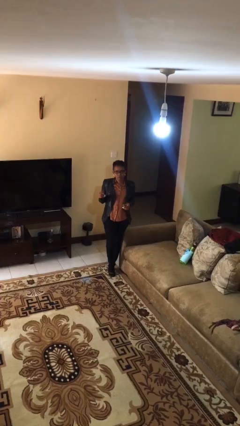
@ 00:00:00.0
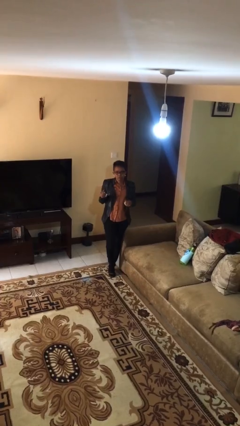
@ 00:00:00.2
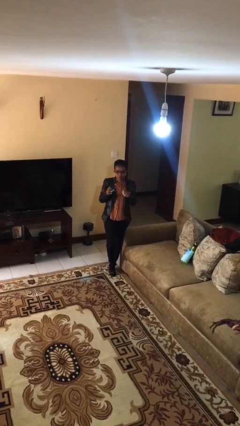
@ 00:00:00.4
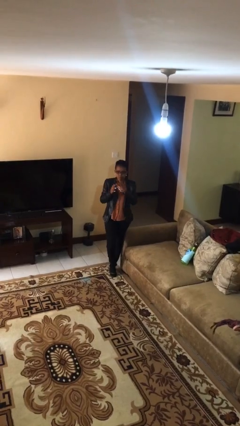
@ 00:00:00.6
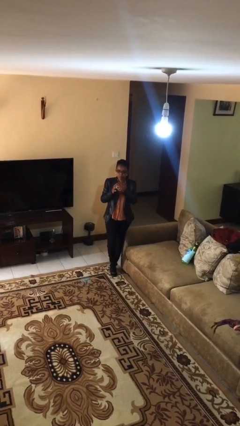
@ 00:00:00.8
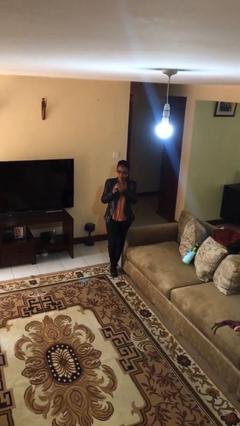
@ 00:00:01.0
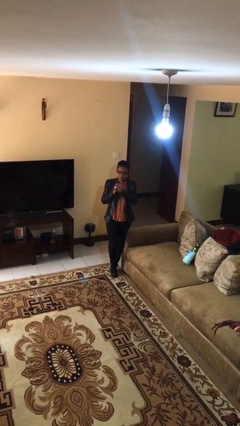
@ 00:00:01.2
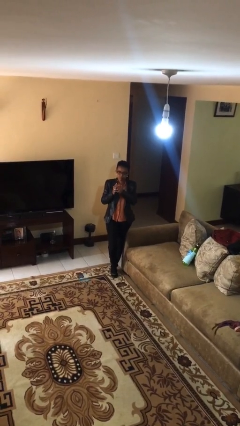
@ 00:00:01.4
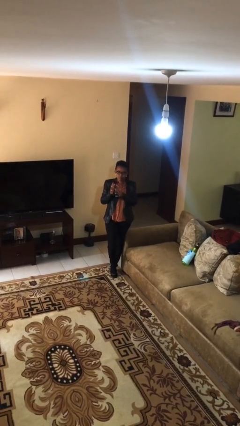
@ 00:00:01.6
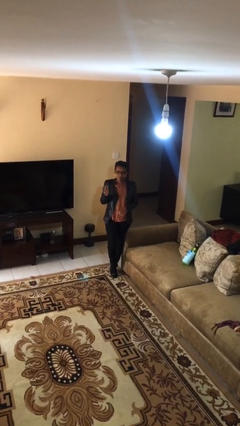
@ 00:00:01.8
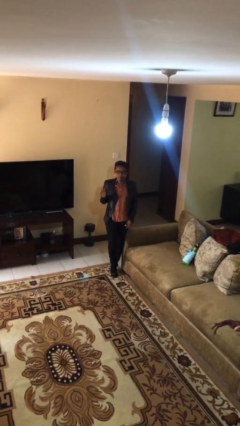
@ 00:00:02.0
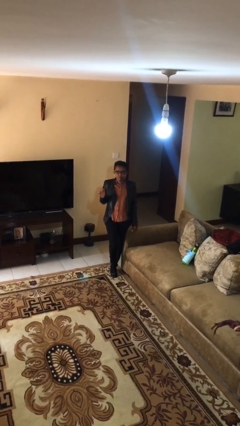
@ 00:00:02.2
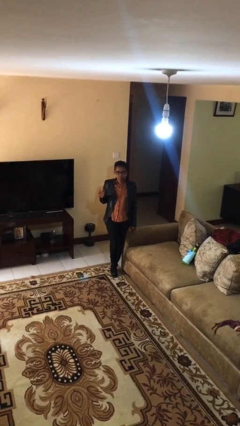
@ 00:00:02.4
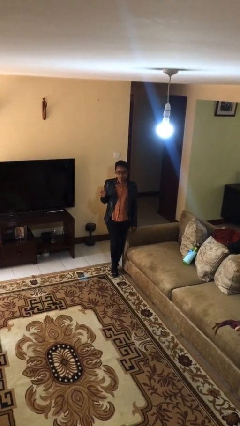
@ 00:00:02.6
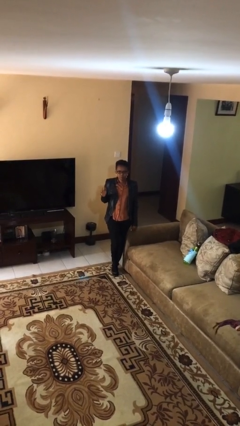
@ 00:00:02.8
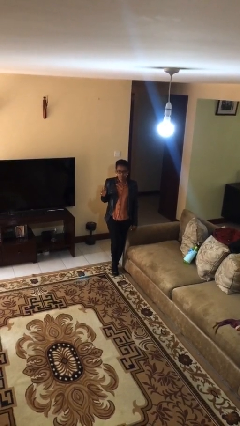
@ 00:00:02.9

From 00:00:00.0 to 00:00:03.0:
person puts on ring

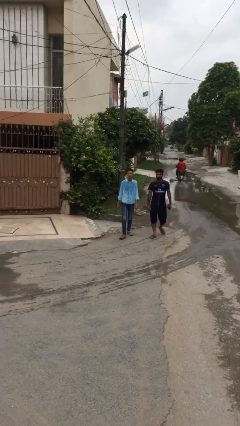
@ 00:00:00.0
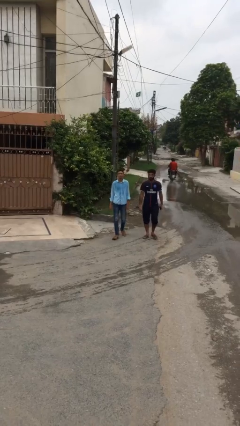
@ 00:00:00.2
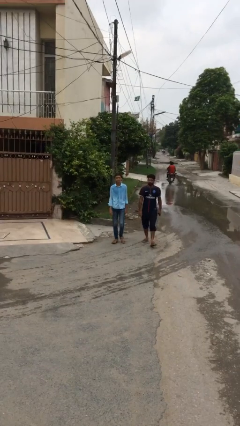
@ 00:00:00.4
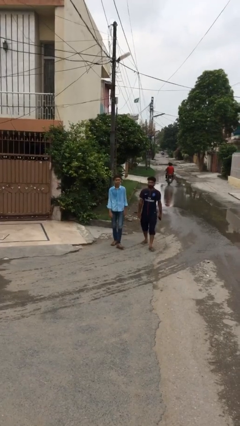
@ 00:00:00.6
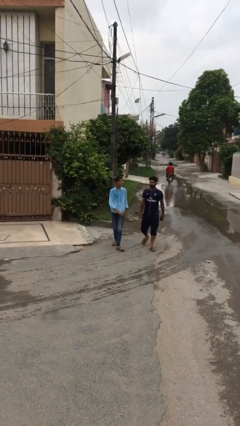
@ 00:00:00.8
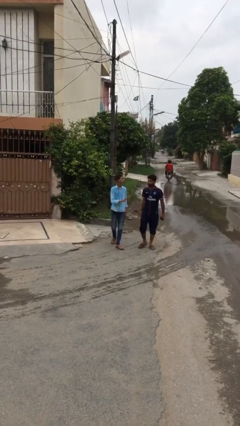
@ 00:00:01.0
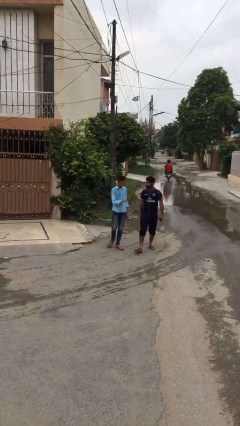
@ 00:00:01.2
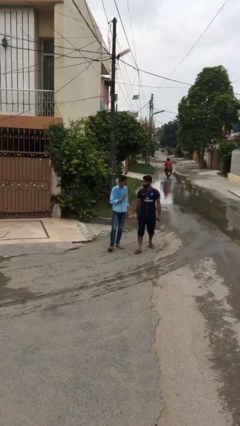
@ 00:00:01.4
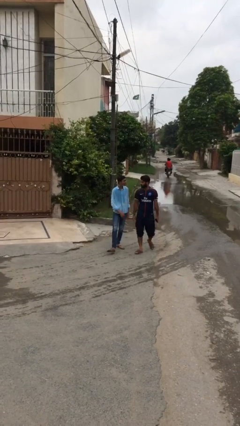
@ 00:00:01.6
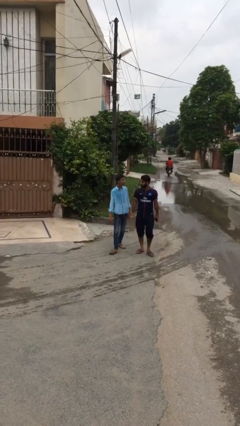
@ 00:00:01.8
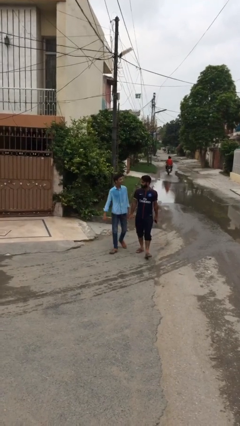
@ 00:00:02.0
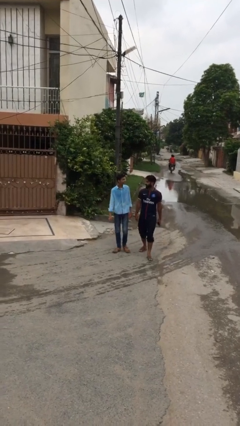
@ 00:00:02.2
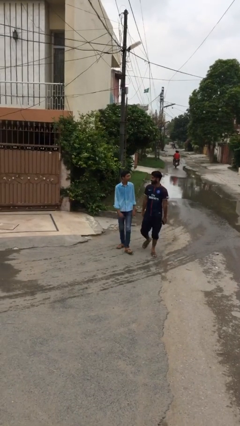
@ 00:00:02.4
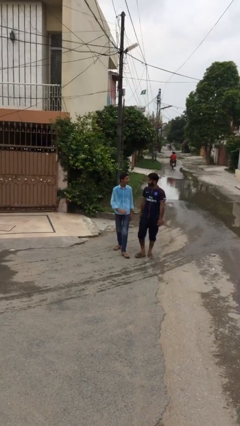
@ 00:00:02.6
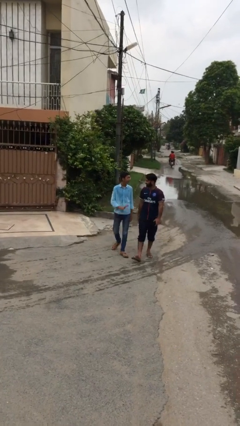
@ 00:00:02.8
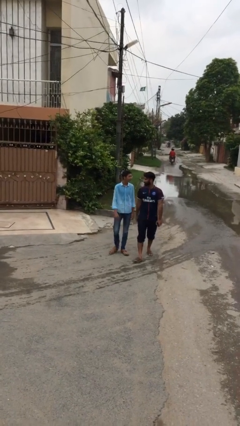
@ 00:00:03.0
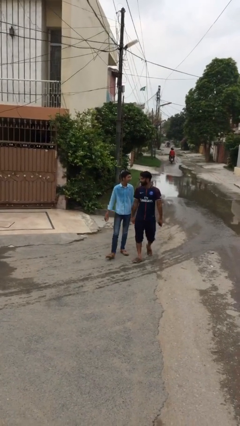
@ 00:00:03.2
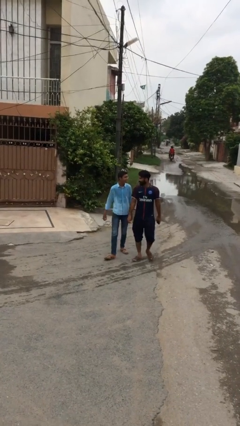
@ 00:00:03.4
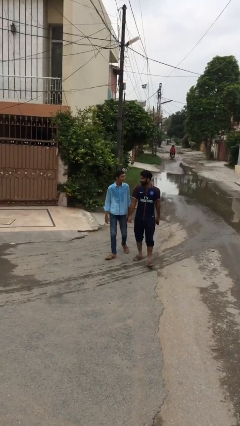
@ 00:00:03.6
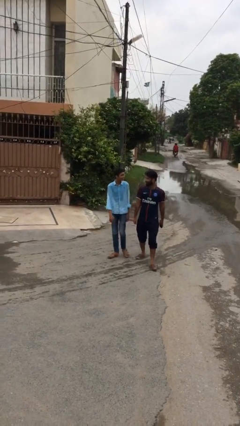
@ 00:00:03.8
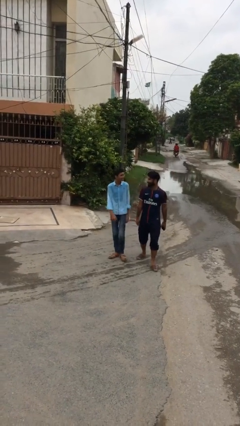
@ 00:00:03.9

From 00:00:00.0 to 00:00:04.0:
person talks to person

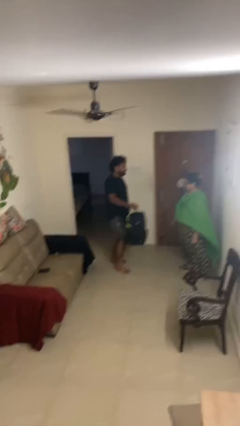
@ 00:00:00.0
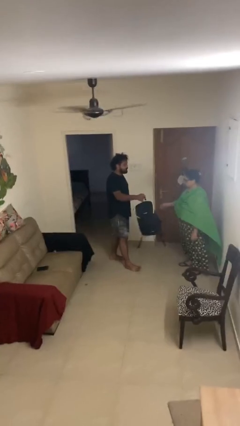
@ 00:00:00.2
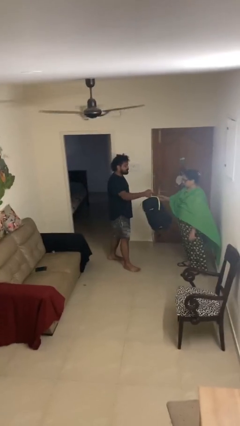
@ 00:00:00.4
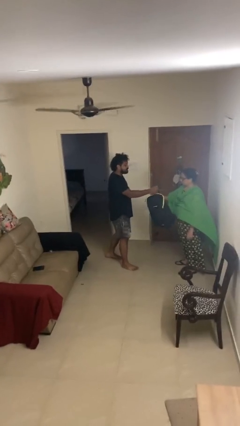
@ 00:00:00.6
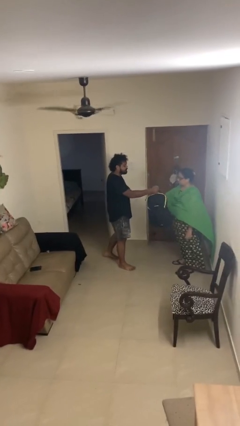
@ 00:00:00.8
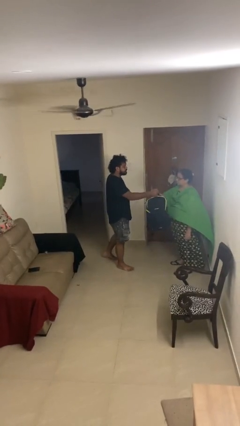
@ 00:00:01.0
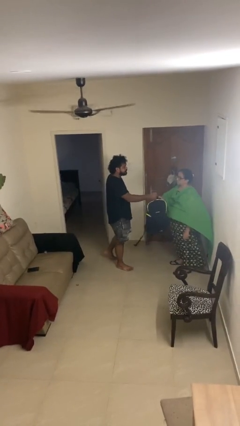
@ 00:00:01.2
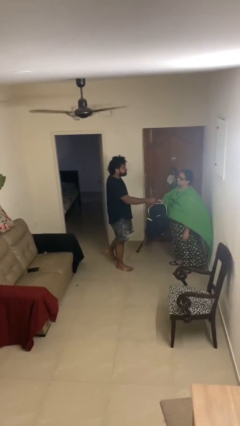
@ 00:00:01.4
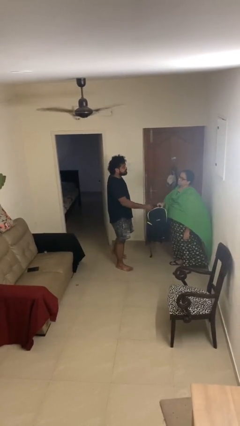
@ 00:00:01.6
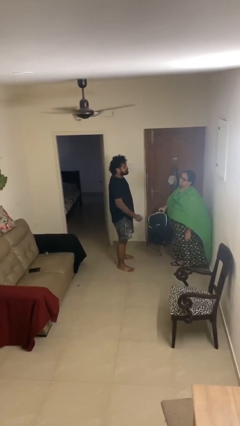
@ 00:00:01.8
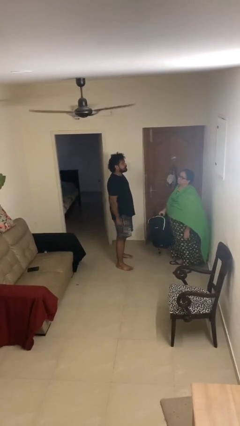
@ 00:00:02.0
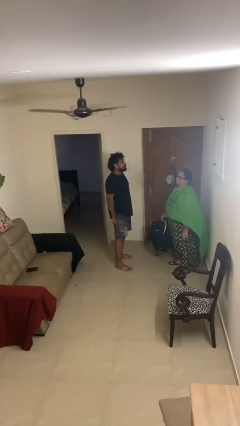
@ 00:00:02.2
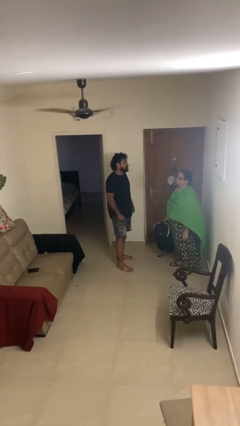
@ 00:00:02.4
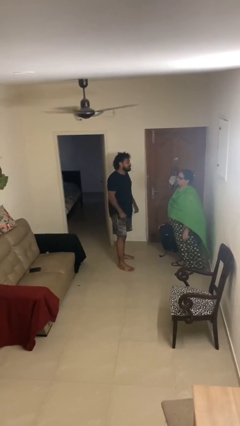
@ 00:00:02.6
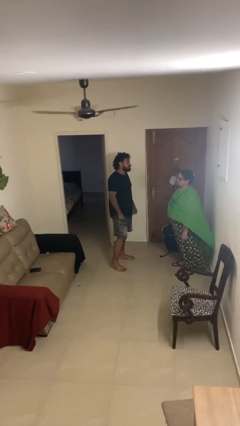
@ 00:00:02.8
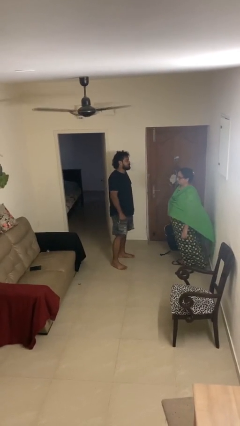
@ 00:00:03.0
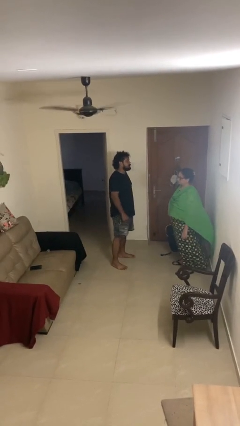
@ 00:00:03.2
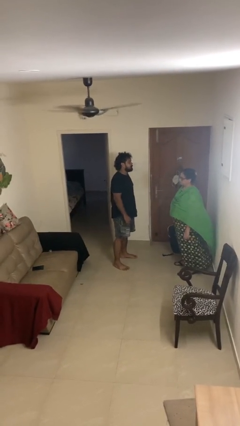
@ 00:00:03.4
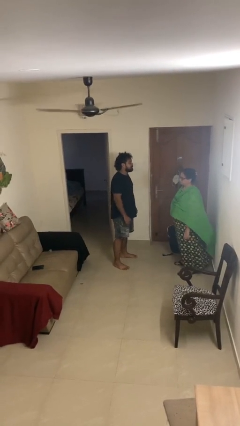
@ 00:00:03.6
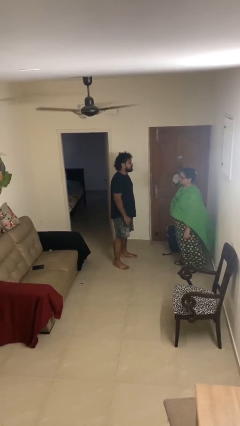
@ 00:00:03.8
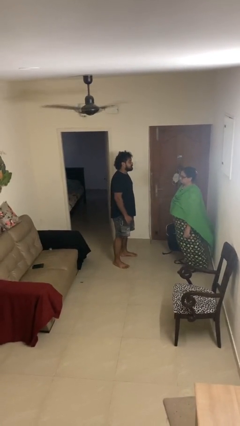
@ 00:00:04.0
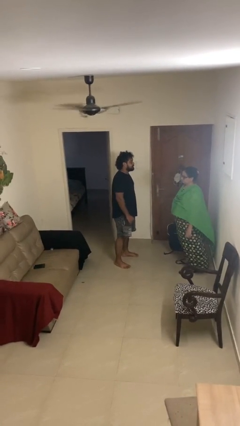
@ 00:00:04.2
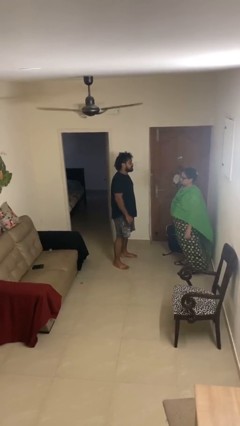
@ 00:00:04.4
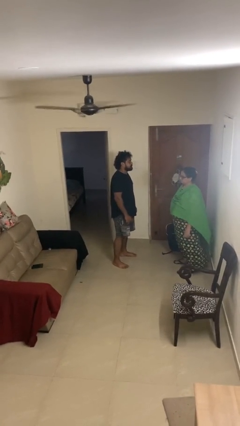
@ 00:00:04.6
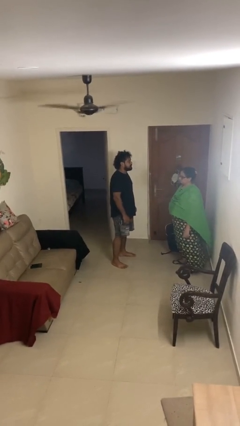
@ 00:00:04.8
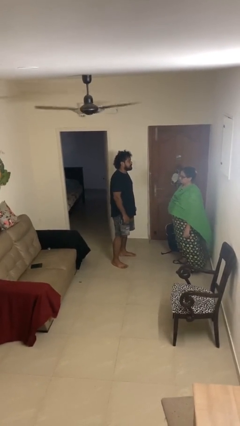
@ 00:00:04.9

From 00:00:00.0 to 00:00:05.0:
person transfers object to person

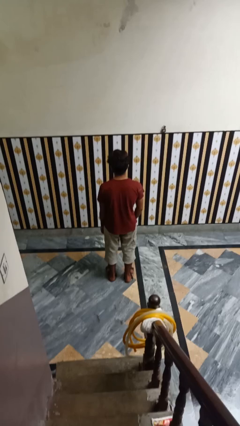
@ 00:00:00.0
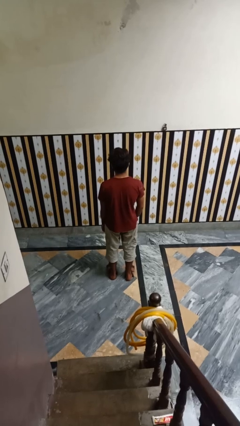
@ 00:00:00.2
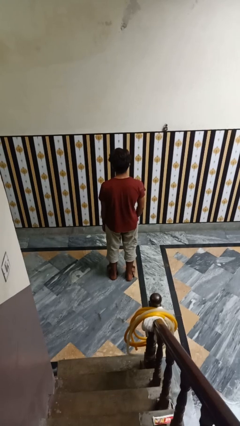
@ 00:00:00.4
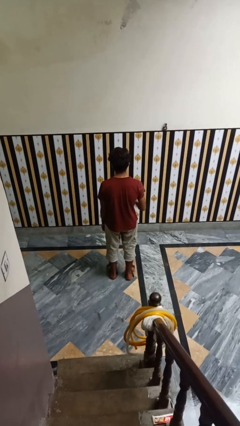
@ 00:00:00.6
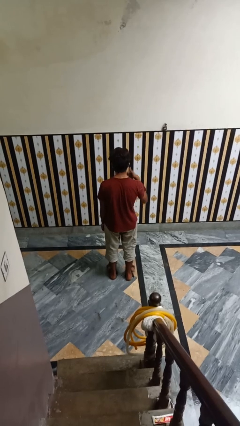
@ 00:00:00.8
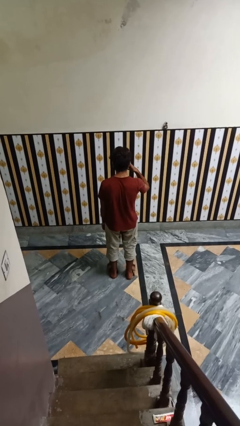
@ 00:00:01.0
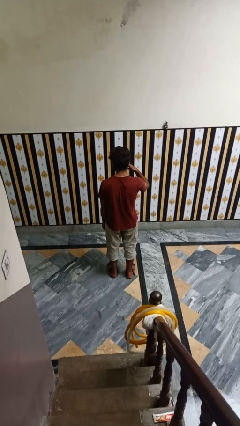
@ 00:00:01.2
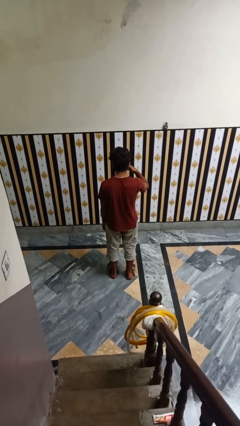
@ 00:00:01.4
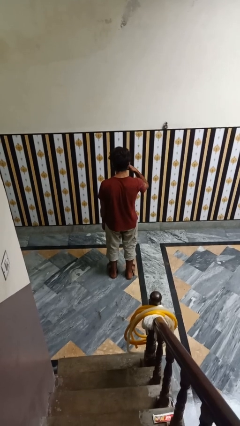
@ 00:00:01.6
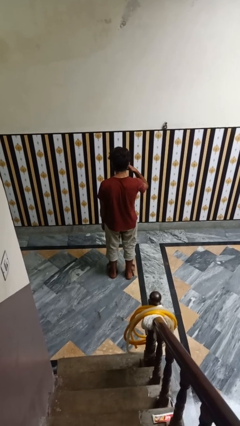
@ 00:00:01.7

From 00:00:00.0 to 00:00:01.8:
person gestures call me

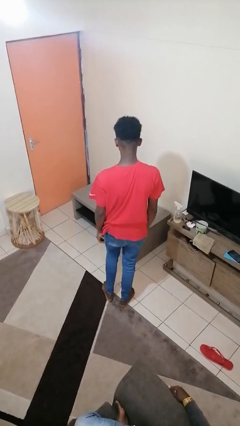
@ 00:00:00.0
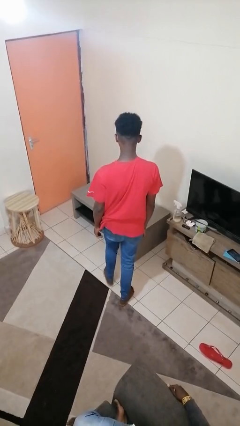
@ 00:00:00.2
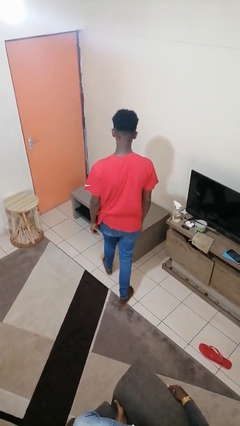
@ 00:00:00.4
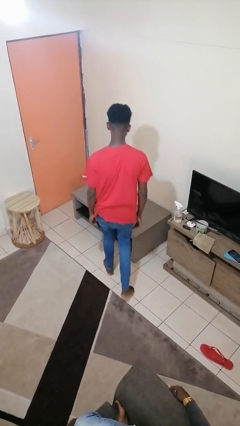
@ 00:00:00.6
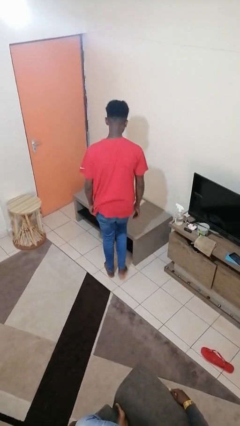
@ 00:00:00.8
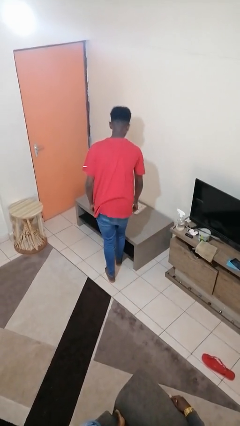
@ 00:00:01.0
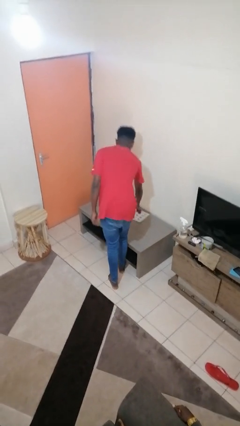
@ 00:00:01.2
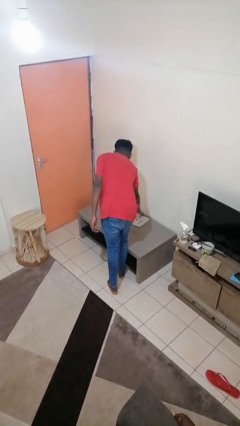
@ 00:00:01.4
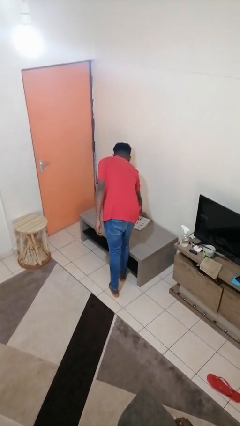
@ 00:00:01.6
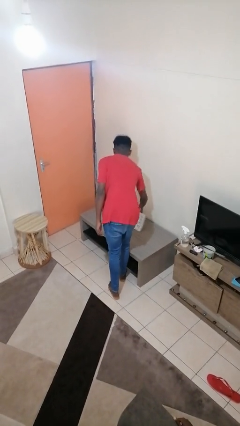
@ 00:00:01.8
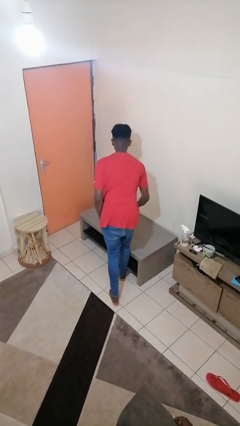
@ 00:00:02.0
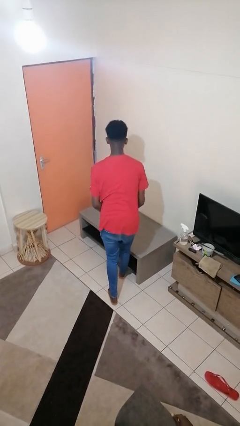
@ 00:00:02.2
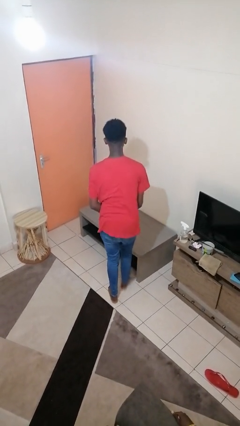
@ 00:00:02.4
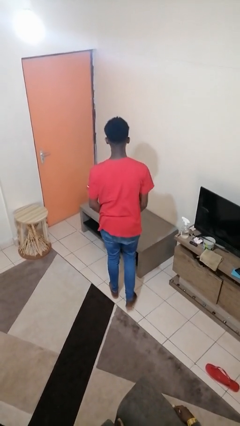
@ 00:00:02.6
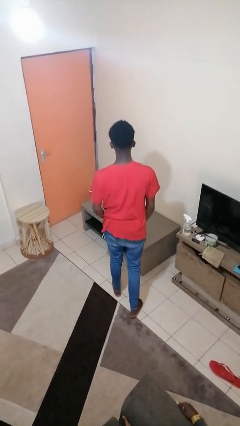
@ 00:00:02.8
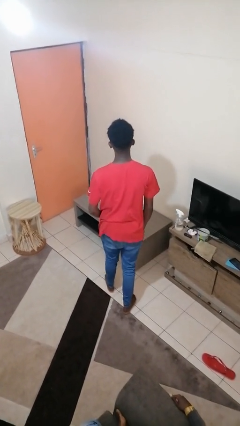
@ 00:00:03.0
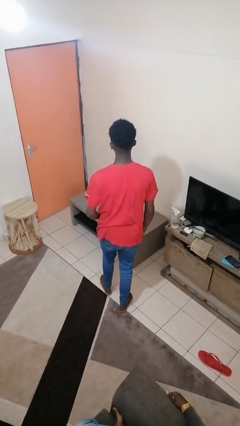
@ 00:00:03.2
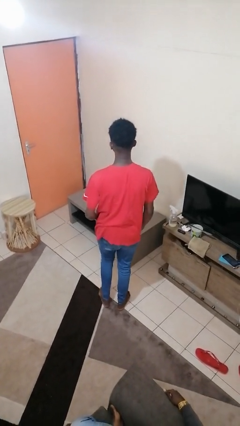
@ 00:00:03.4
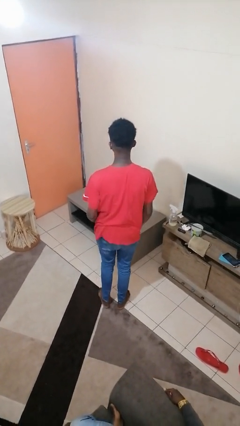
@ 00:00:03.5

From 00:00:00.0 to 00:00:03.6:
person picks up object from table
